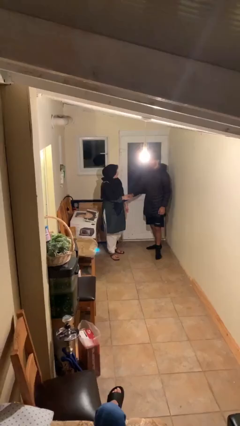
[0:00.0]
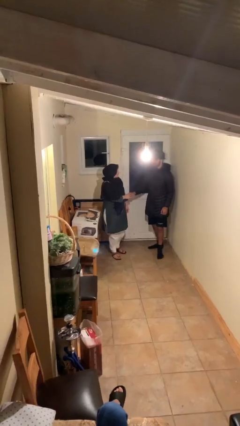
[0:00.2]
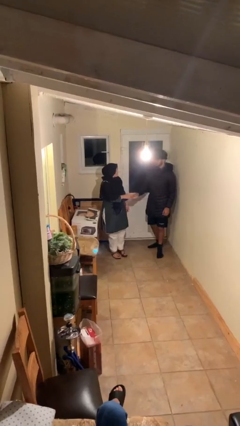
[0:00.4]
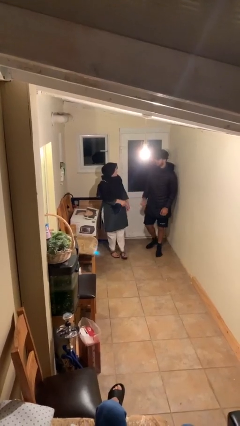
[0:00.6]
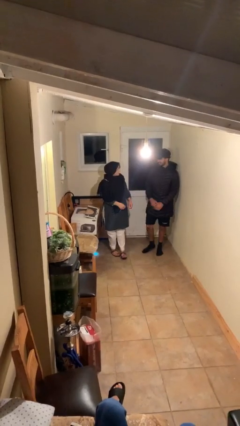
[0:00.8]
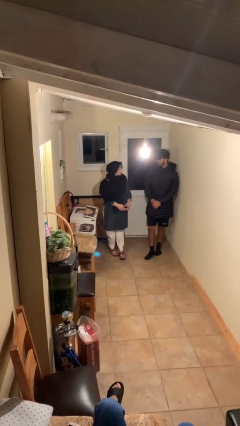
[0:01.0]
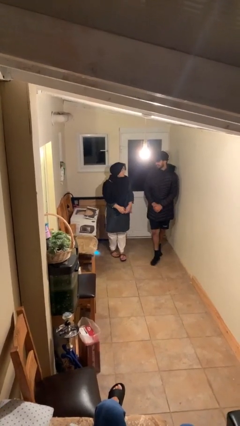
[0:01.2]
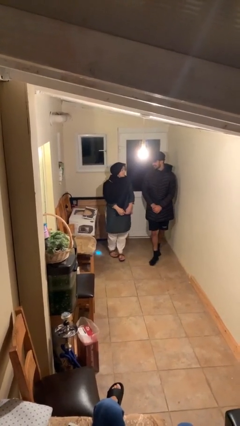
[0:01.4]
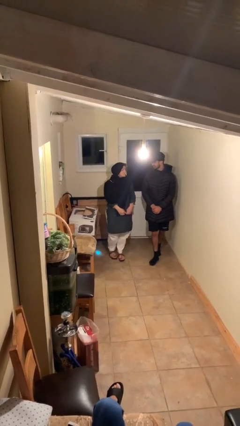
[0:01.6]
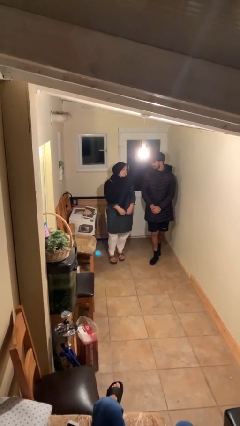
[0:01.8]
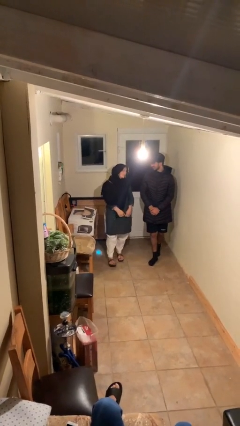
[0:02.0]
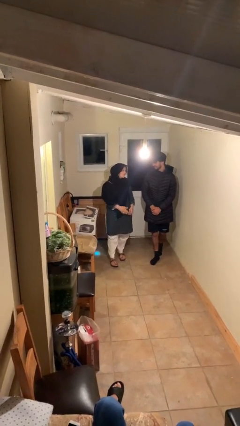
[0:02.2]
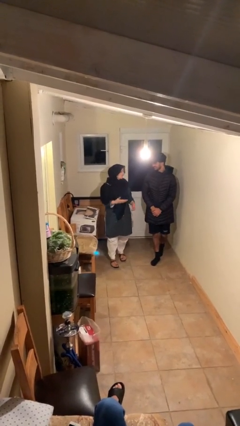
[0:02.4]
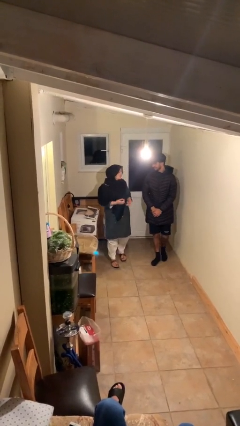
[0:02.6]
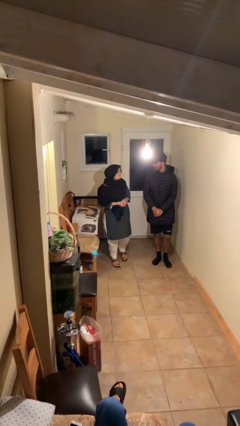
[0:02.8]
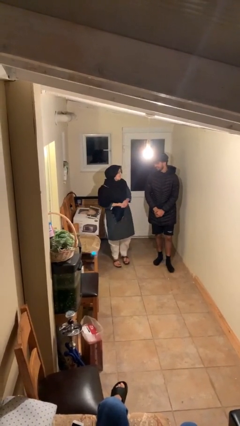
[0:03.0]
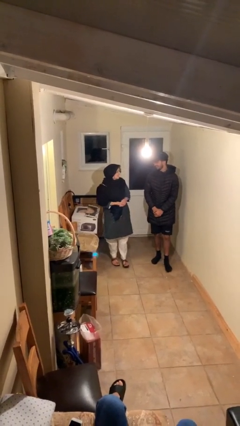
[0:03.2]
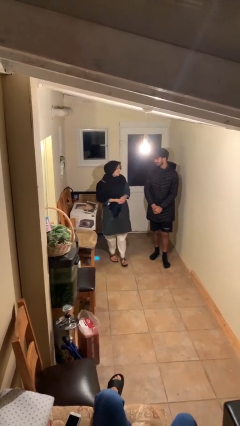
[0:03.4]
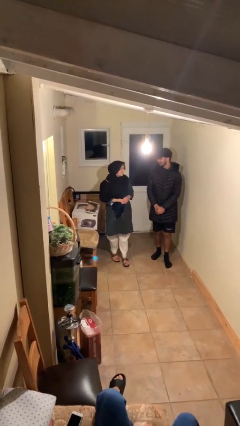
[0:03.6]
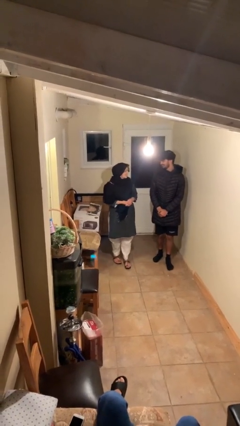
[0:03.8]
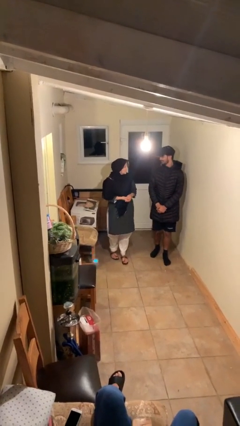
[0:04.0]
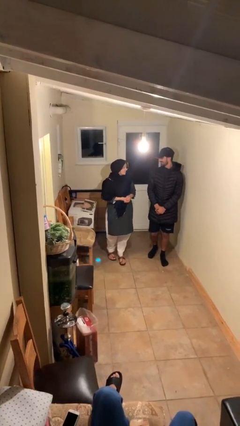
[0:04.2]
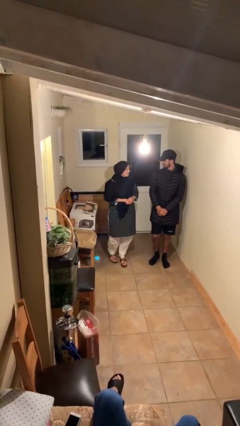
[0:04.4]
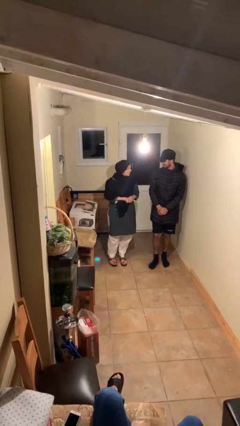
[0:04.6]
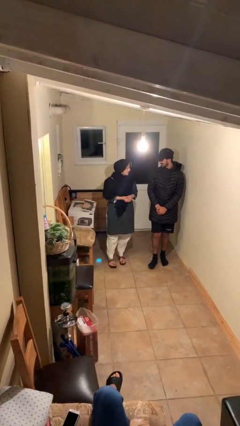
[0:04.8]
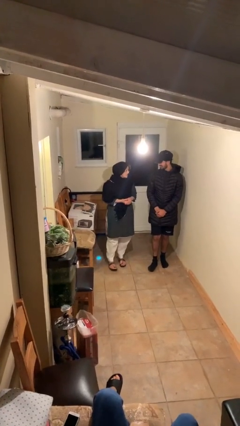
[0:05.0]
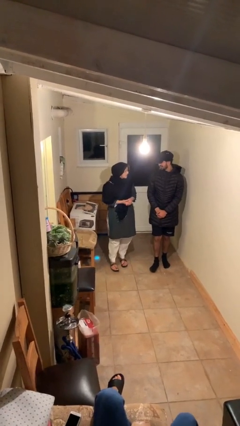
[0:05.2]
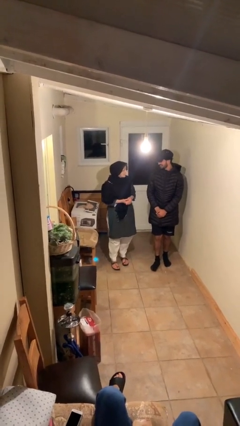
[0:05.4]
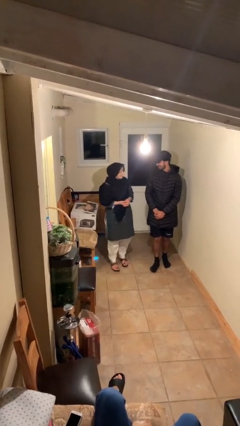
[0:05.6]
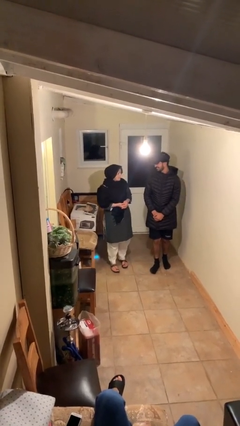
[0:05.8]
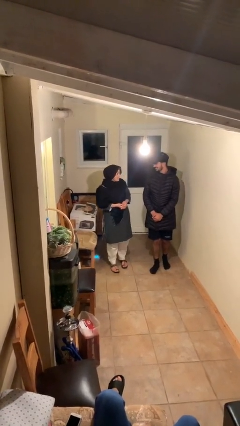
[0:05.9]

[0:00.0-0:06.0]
person talks to person

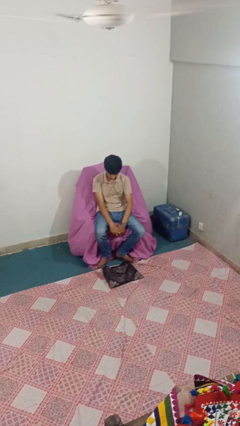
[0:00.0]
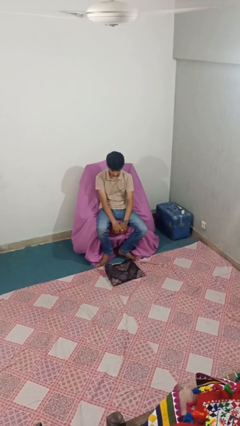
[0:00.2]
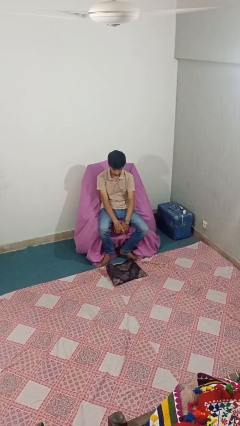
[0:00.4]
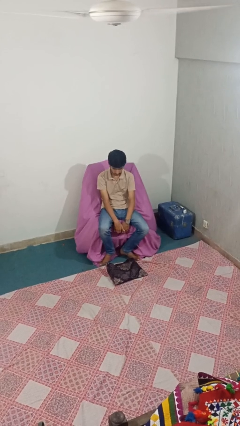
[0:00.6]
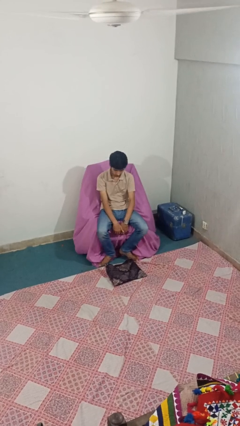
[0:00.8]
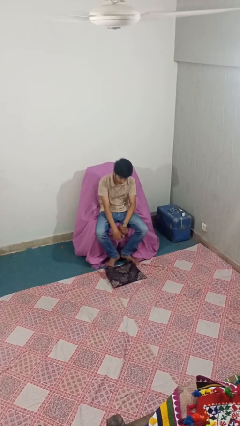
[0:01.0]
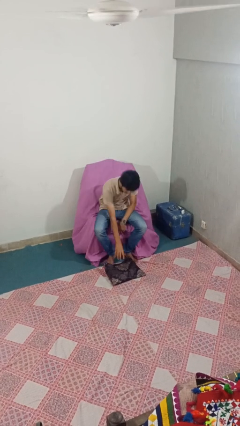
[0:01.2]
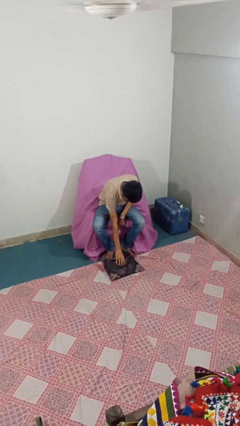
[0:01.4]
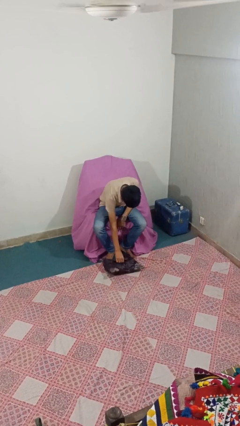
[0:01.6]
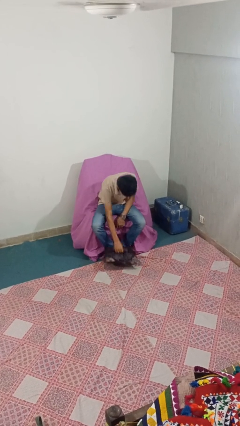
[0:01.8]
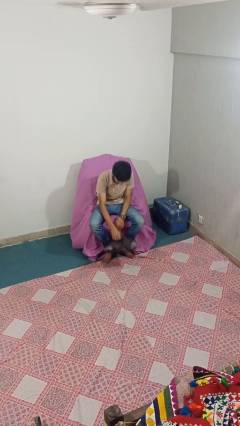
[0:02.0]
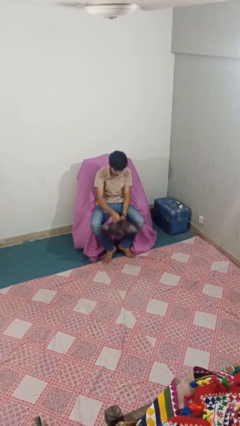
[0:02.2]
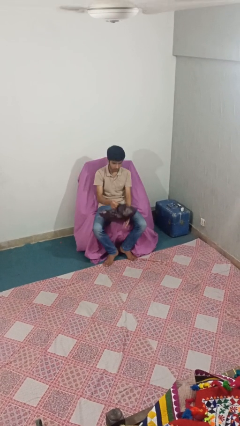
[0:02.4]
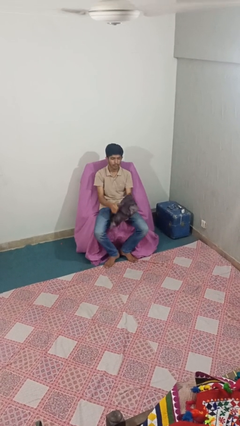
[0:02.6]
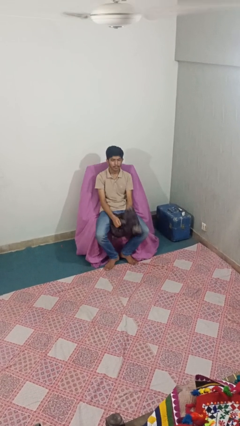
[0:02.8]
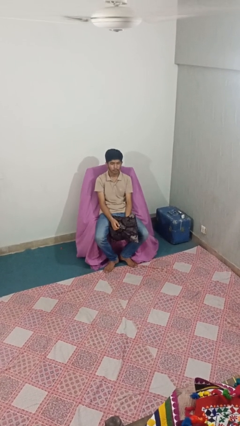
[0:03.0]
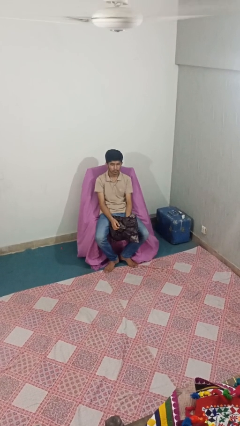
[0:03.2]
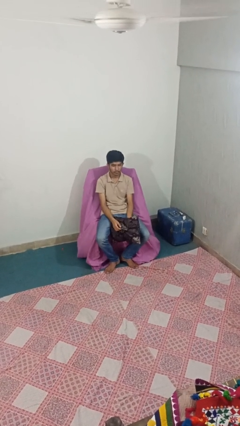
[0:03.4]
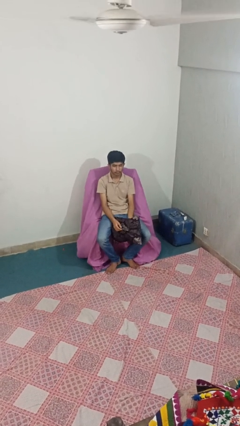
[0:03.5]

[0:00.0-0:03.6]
person picks up object from floor

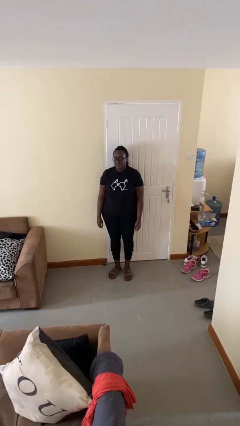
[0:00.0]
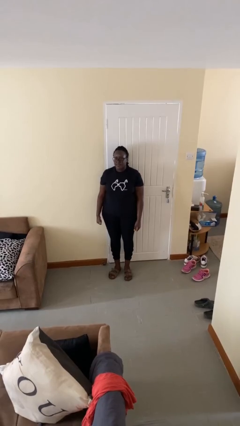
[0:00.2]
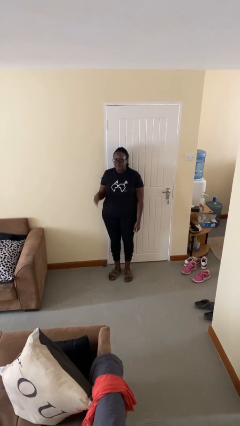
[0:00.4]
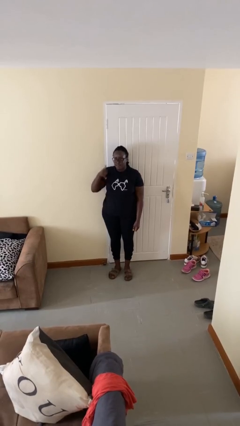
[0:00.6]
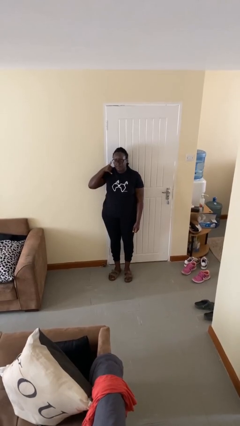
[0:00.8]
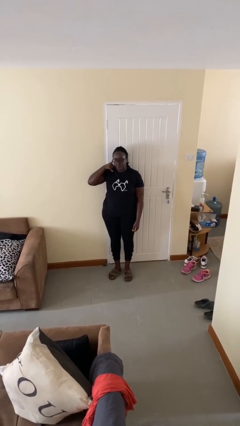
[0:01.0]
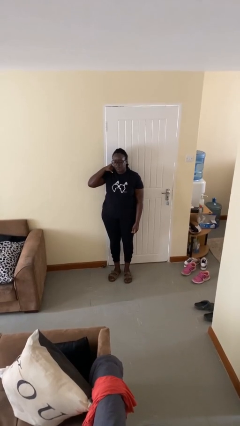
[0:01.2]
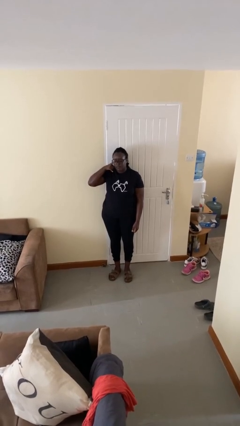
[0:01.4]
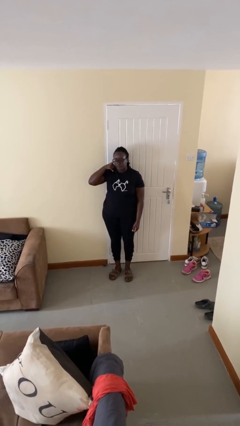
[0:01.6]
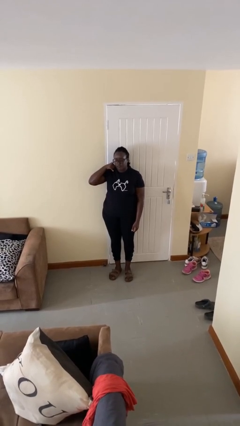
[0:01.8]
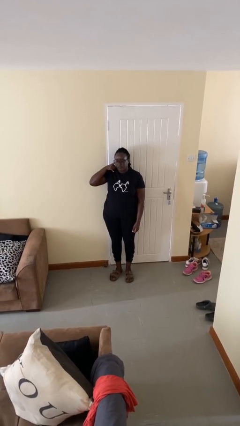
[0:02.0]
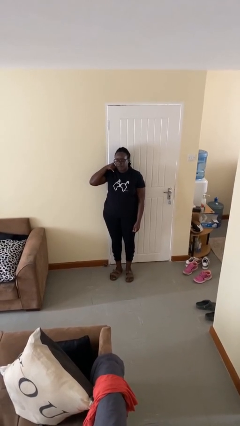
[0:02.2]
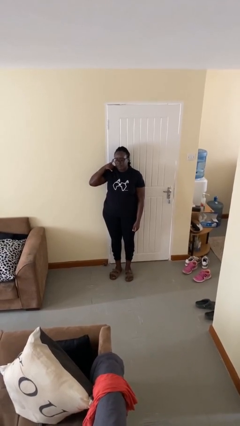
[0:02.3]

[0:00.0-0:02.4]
person gestures call me

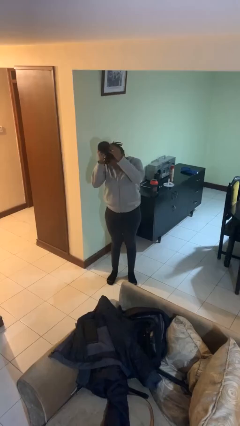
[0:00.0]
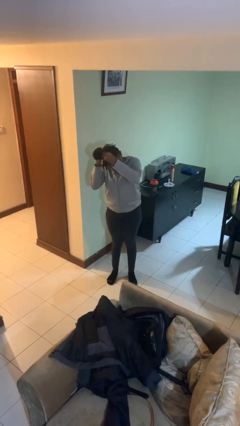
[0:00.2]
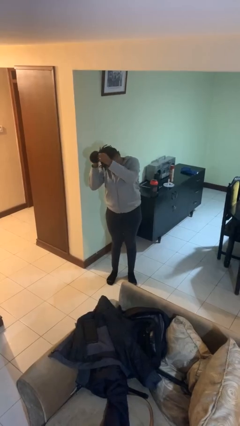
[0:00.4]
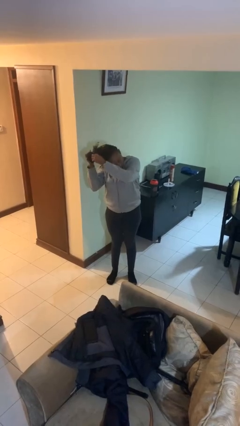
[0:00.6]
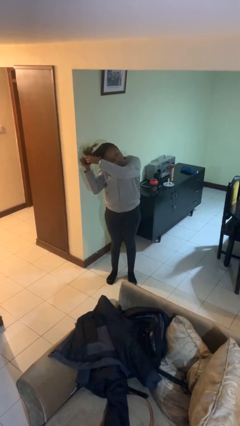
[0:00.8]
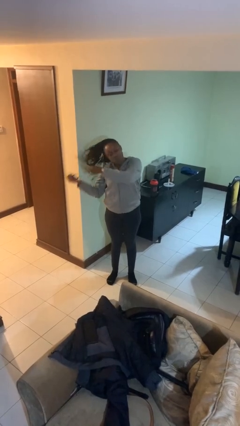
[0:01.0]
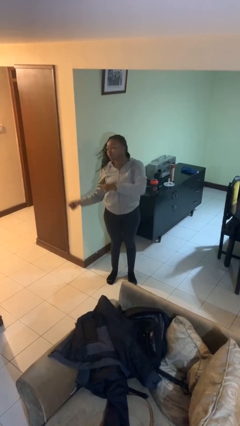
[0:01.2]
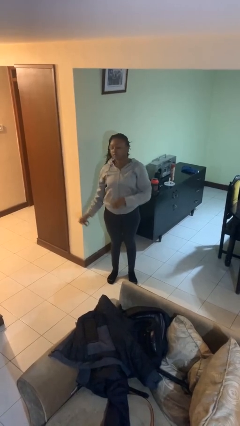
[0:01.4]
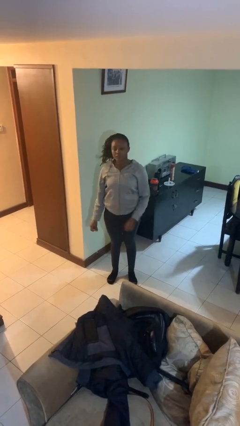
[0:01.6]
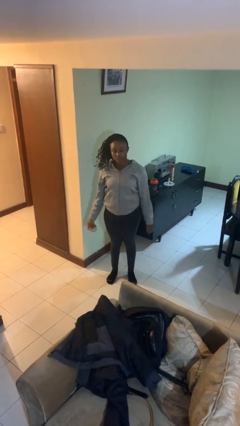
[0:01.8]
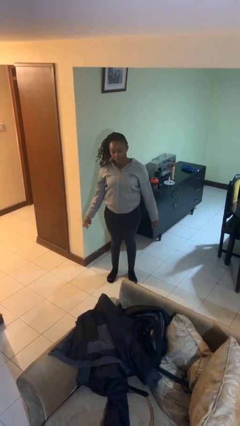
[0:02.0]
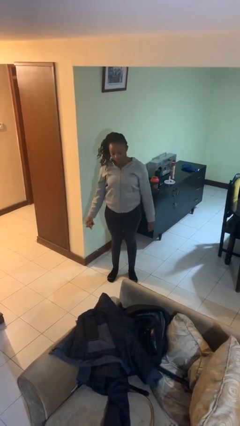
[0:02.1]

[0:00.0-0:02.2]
person takes off hairtie

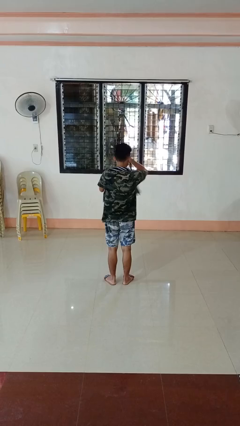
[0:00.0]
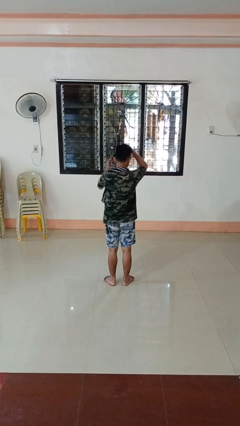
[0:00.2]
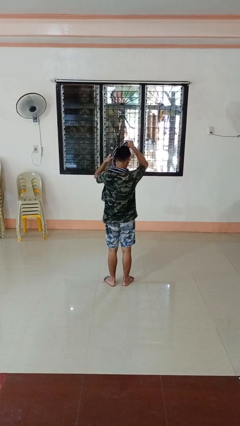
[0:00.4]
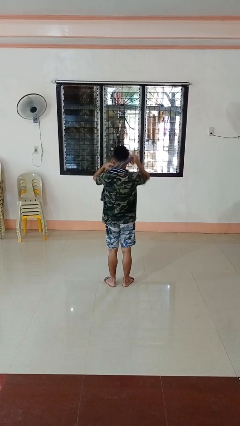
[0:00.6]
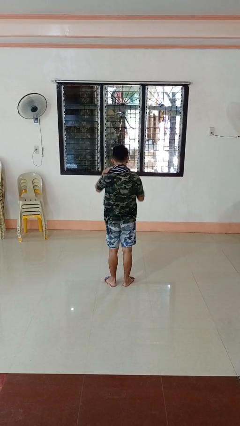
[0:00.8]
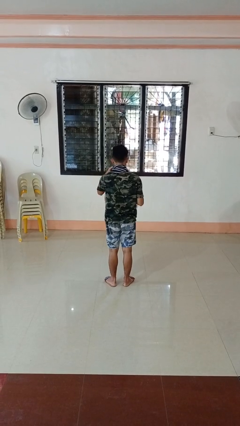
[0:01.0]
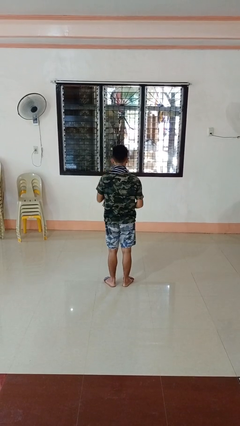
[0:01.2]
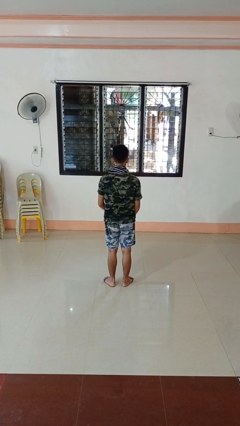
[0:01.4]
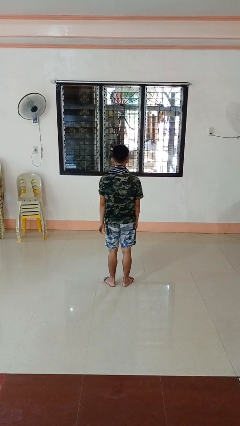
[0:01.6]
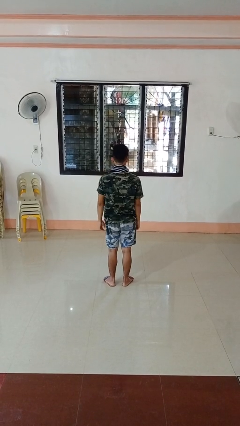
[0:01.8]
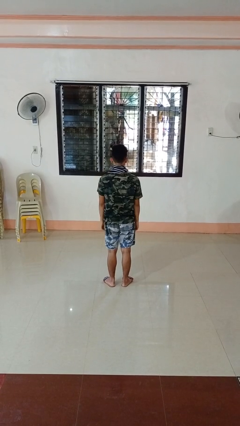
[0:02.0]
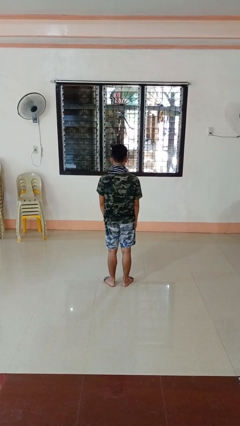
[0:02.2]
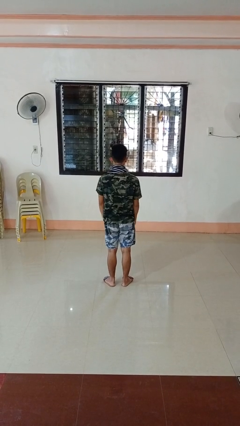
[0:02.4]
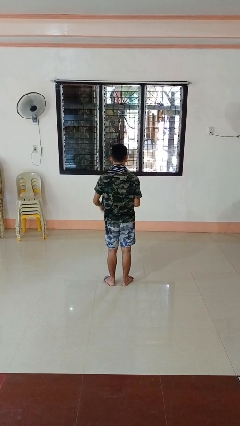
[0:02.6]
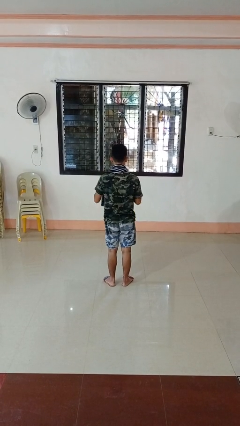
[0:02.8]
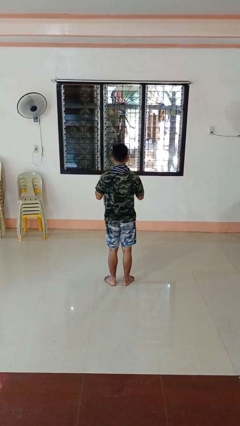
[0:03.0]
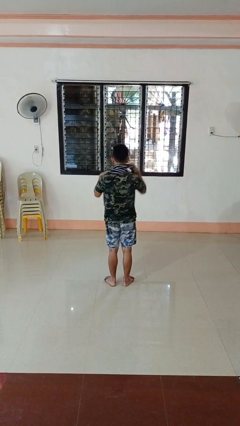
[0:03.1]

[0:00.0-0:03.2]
person puts on scarf

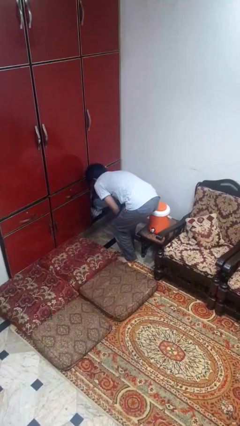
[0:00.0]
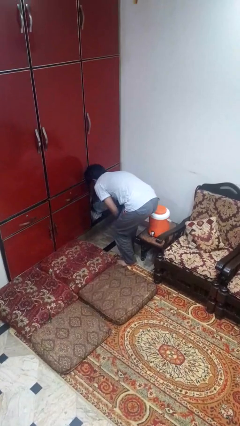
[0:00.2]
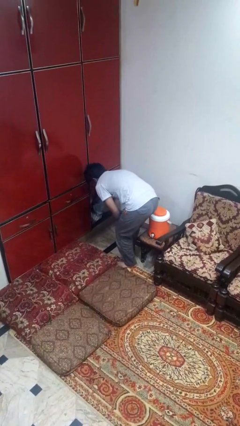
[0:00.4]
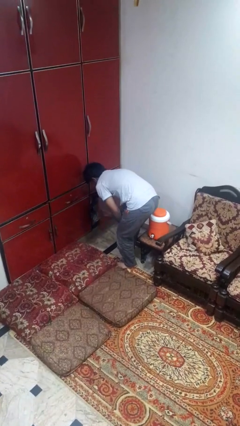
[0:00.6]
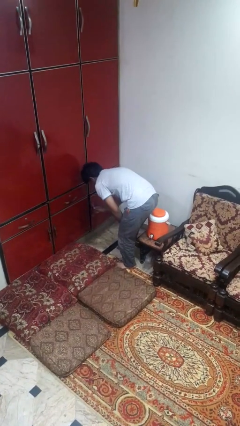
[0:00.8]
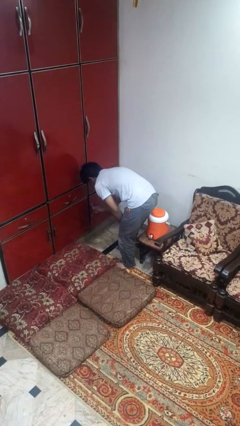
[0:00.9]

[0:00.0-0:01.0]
person closes cabinet
